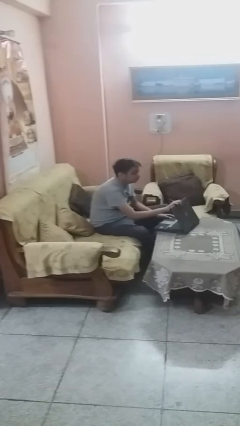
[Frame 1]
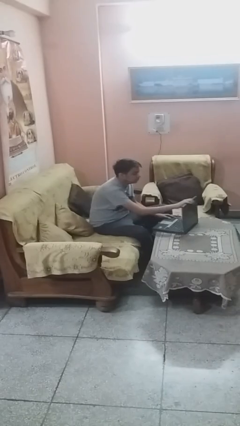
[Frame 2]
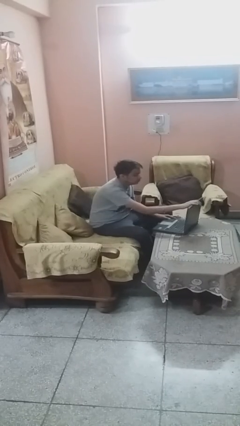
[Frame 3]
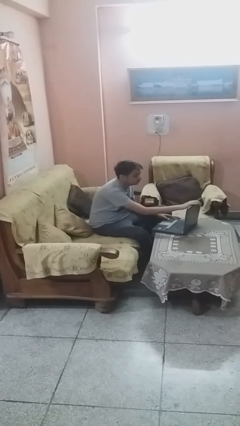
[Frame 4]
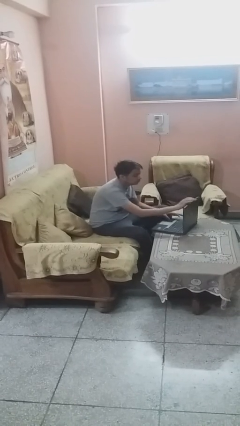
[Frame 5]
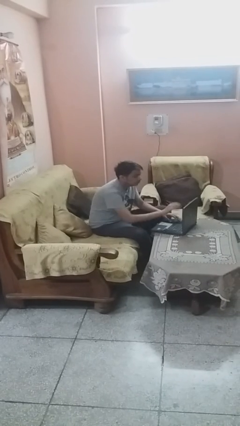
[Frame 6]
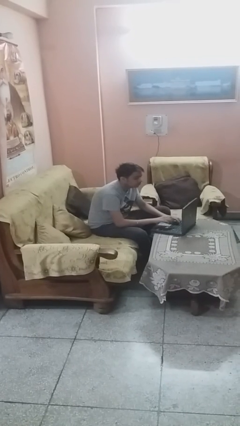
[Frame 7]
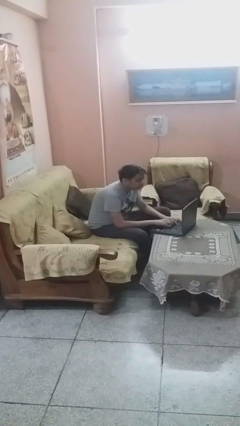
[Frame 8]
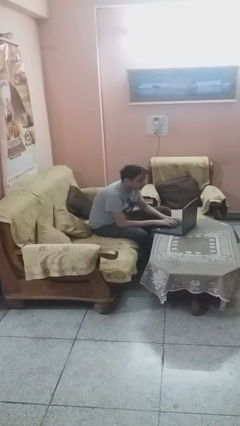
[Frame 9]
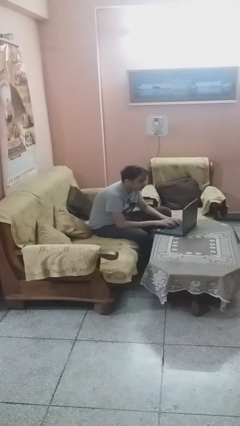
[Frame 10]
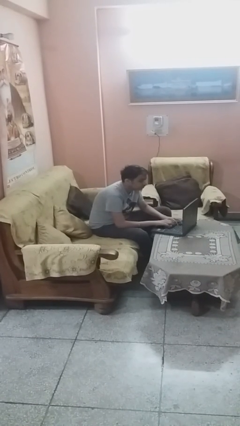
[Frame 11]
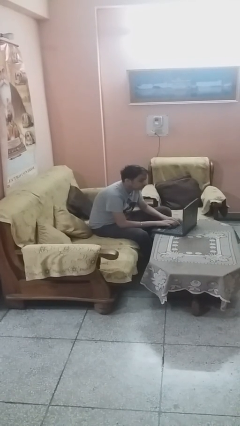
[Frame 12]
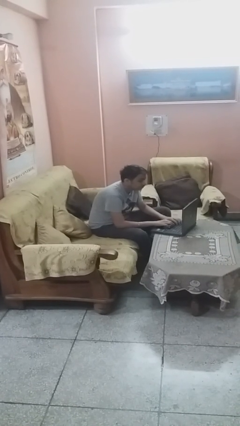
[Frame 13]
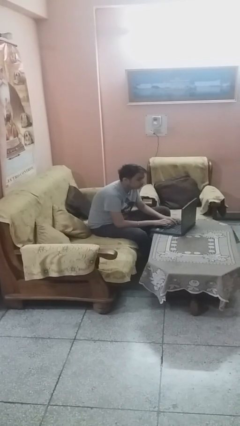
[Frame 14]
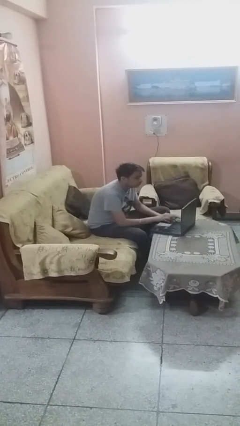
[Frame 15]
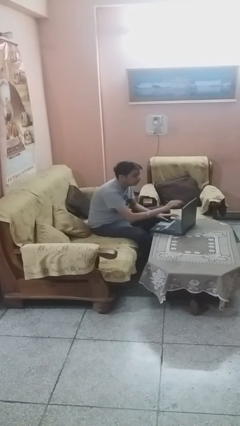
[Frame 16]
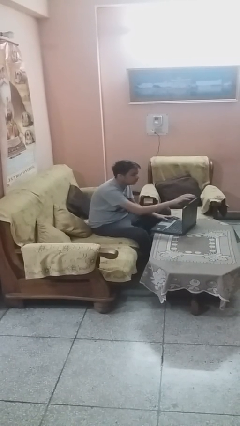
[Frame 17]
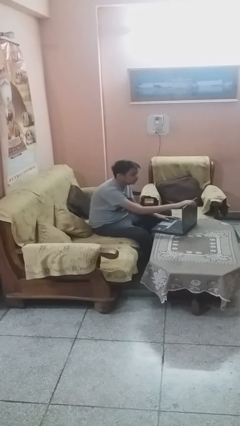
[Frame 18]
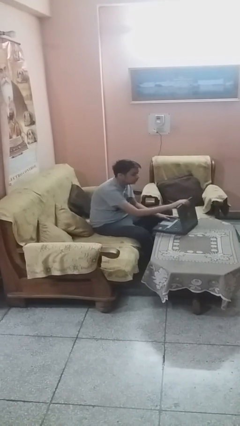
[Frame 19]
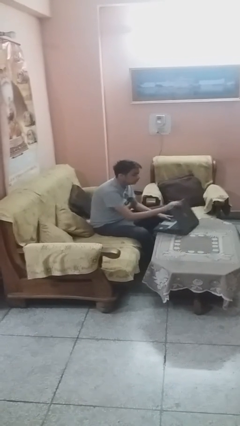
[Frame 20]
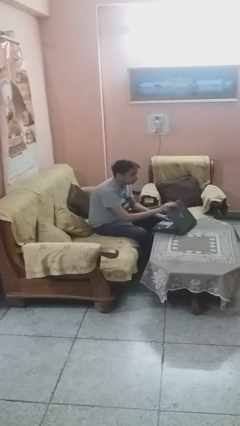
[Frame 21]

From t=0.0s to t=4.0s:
person interacts with laptop

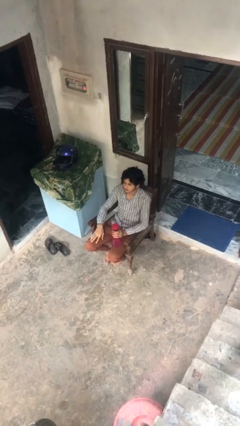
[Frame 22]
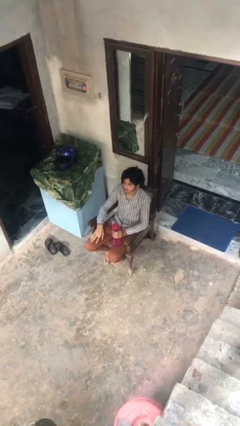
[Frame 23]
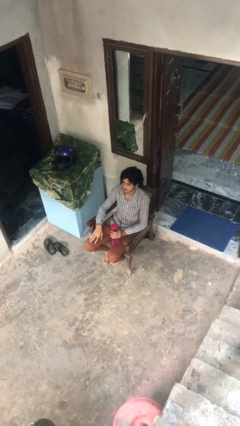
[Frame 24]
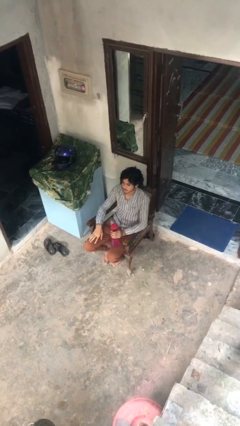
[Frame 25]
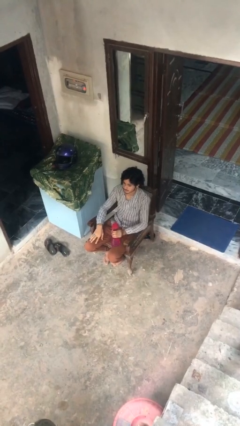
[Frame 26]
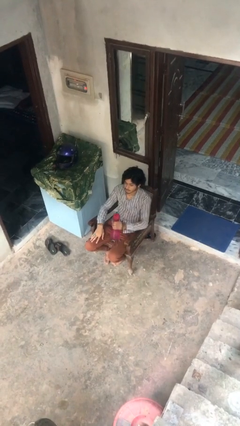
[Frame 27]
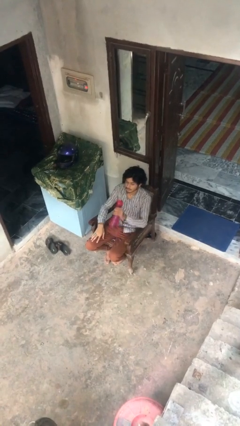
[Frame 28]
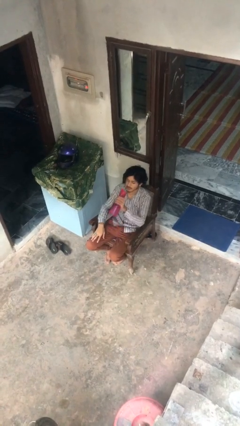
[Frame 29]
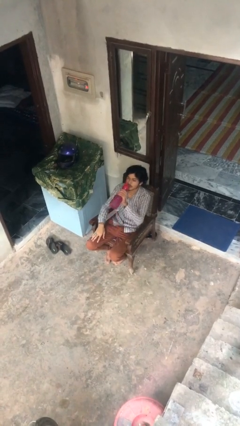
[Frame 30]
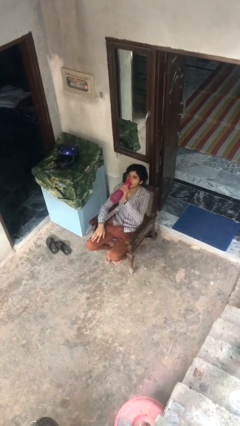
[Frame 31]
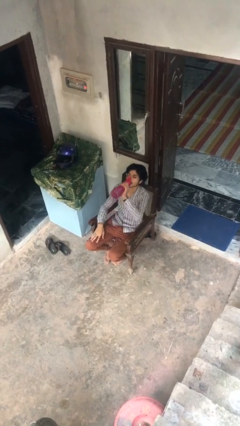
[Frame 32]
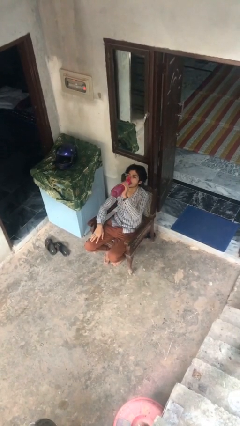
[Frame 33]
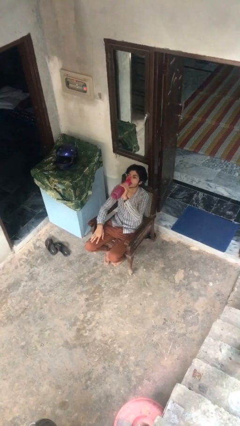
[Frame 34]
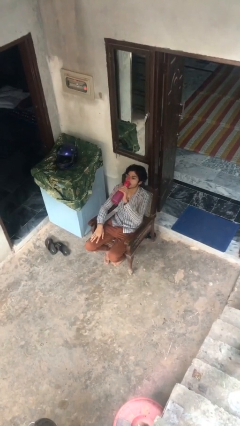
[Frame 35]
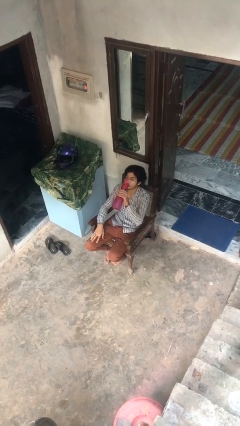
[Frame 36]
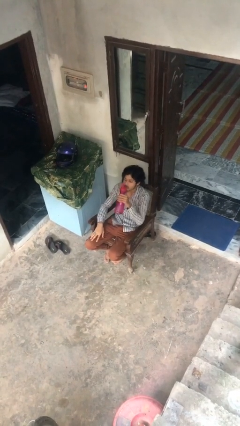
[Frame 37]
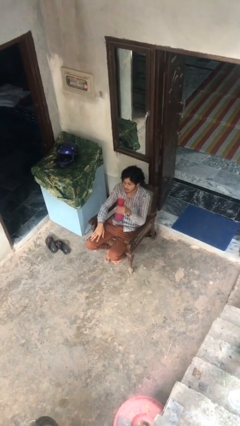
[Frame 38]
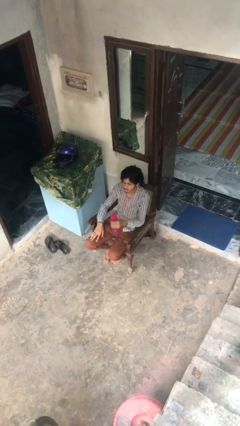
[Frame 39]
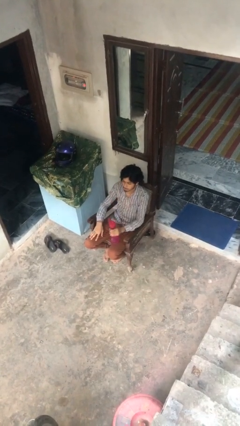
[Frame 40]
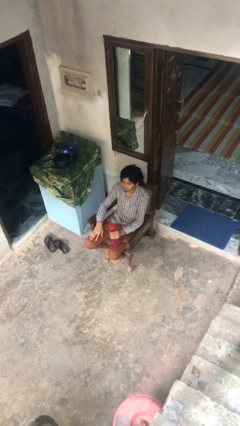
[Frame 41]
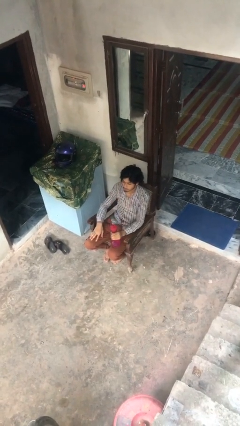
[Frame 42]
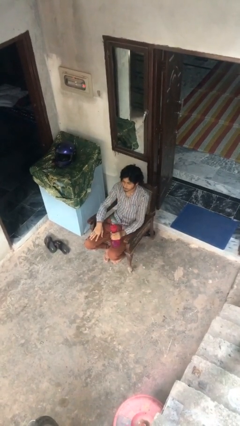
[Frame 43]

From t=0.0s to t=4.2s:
person drinks from bottle

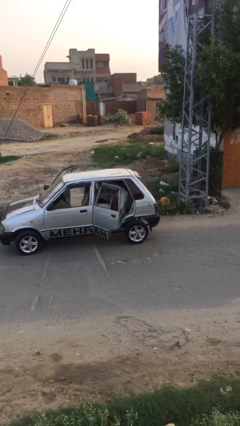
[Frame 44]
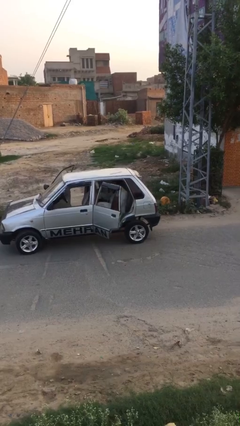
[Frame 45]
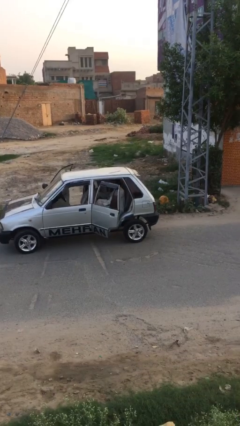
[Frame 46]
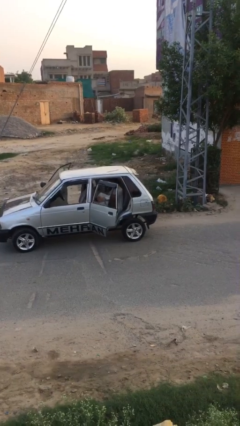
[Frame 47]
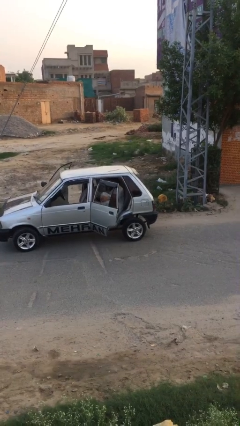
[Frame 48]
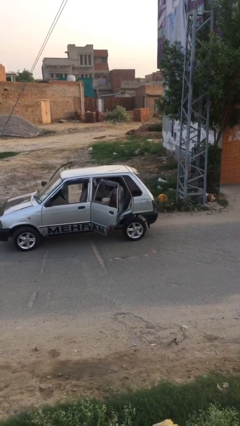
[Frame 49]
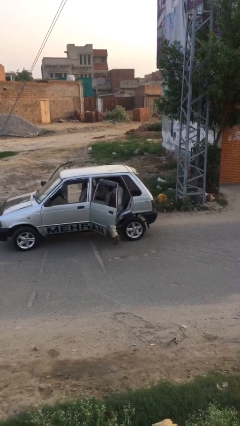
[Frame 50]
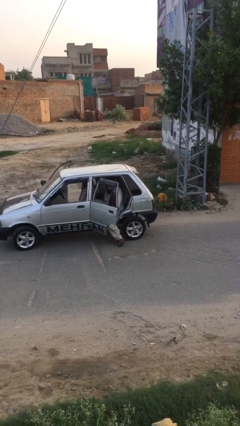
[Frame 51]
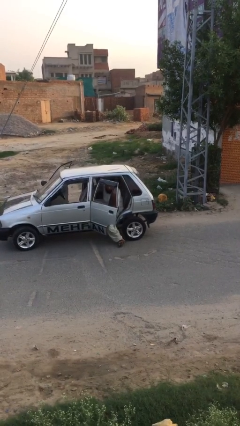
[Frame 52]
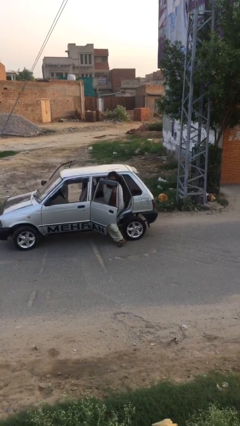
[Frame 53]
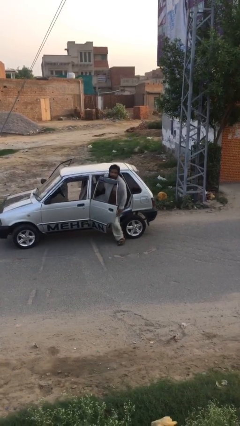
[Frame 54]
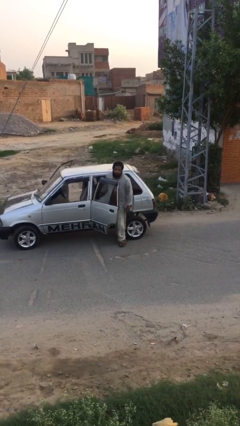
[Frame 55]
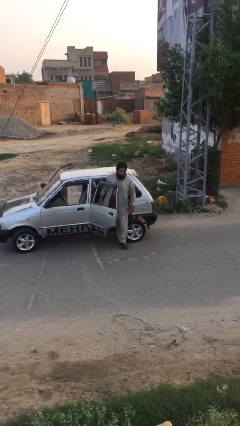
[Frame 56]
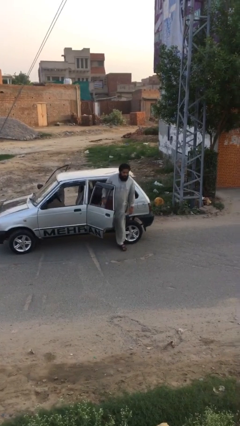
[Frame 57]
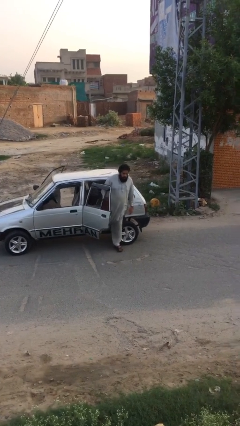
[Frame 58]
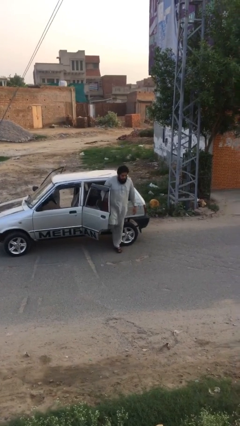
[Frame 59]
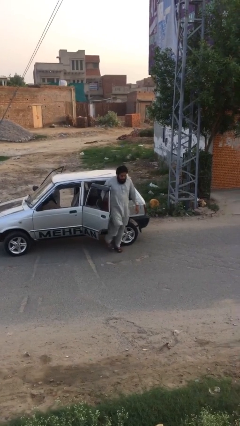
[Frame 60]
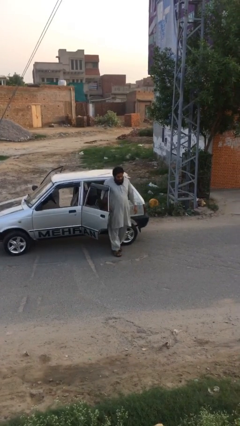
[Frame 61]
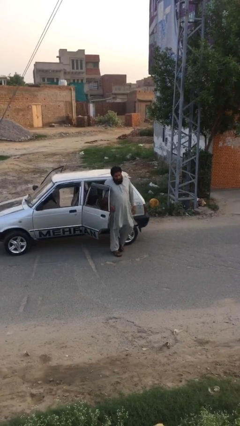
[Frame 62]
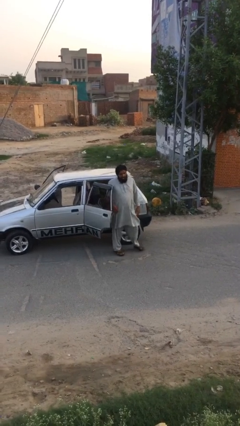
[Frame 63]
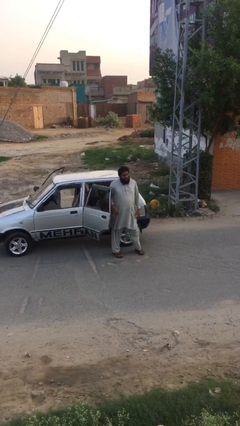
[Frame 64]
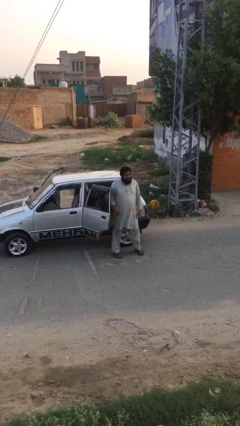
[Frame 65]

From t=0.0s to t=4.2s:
person closes car door

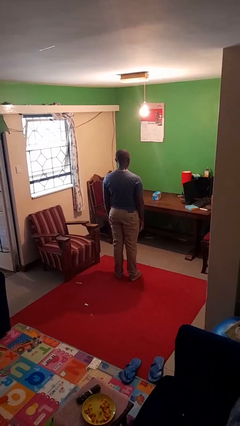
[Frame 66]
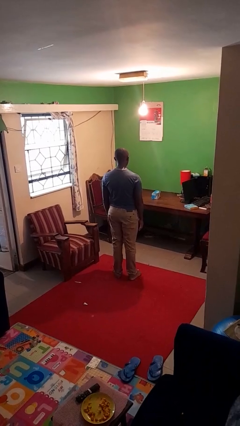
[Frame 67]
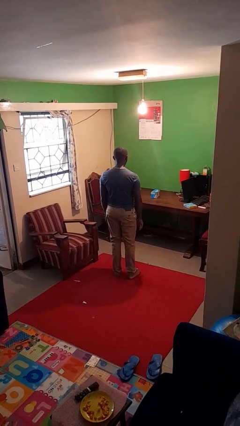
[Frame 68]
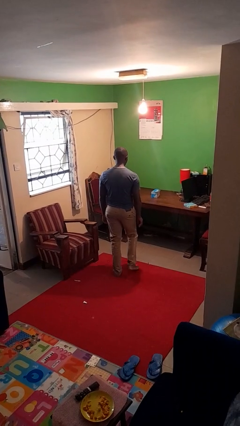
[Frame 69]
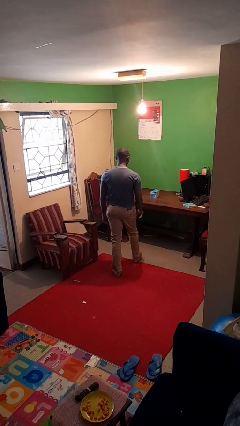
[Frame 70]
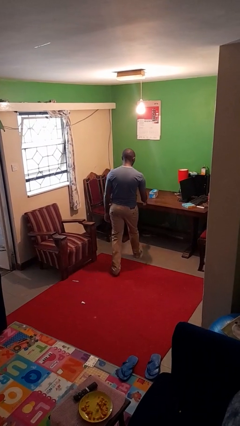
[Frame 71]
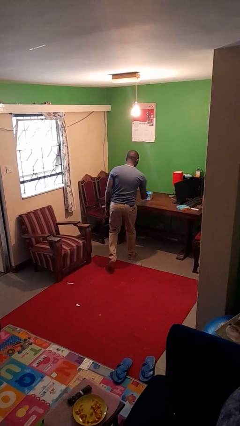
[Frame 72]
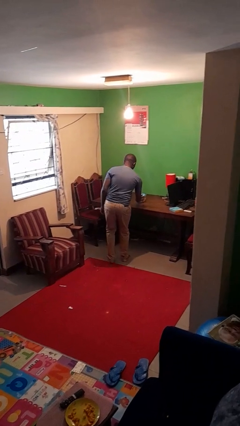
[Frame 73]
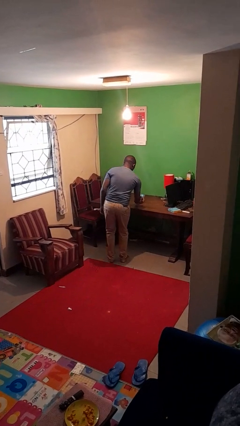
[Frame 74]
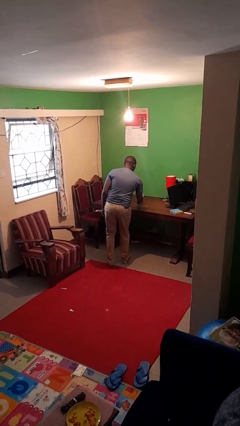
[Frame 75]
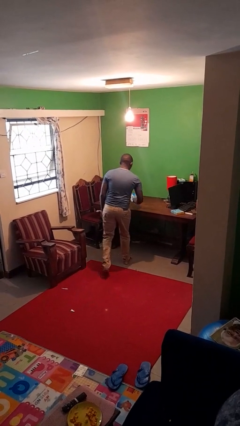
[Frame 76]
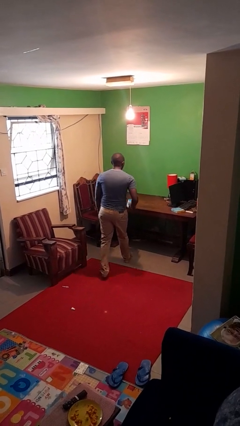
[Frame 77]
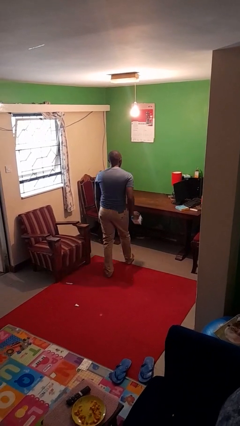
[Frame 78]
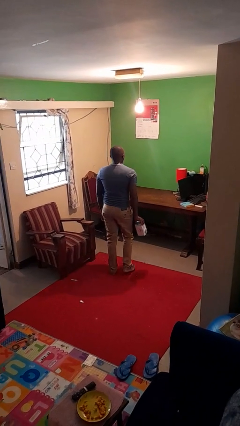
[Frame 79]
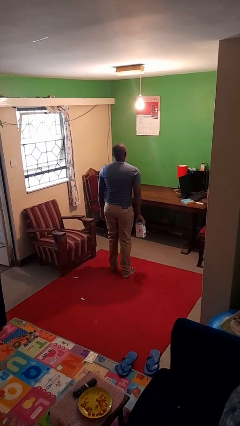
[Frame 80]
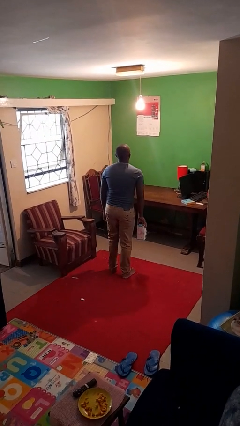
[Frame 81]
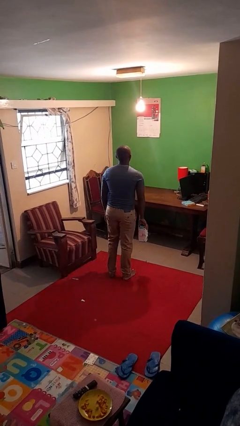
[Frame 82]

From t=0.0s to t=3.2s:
person picks up object from table

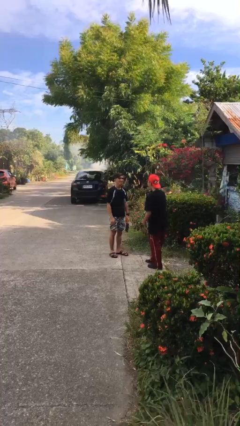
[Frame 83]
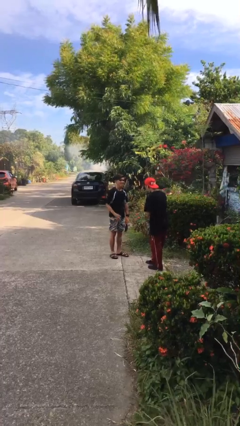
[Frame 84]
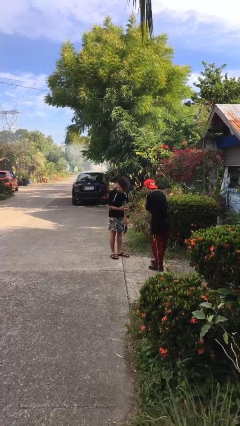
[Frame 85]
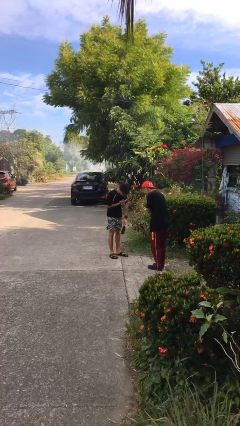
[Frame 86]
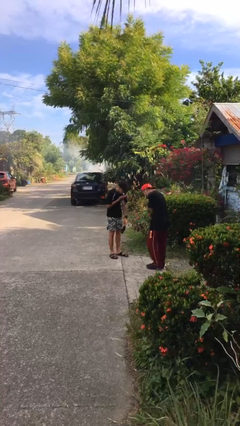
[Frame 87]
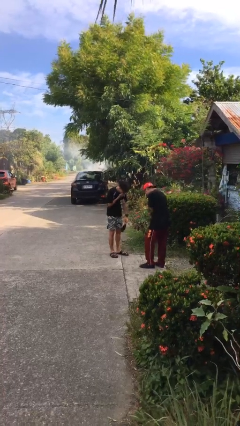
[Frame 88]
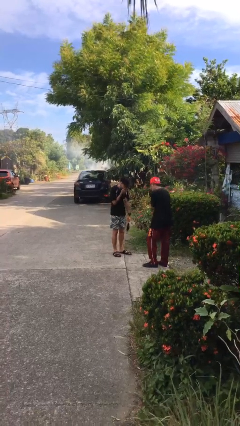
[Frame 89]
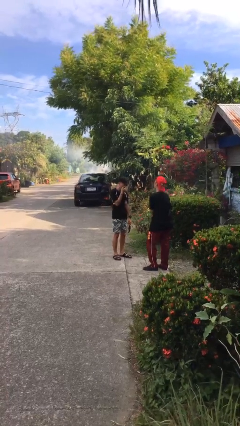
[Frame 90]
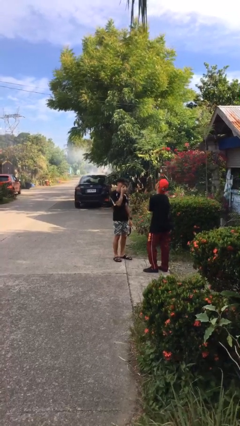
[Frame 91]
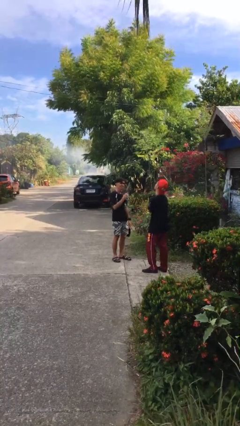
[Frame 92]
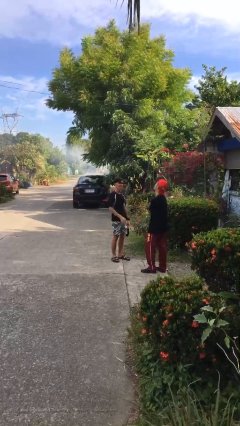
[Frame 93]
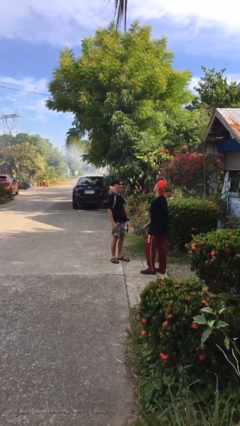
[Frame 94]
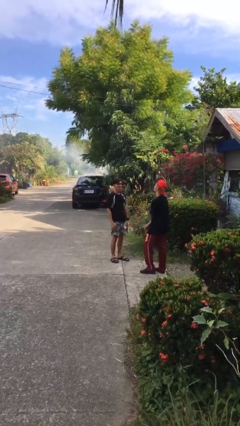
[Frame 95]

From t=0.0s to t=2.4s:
person laughs with person

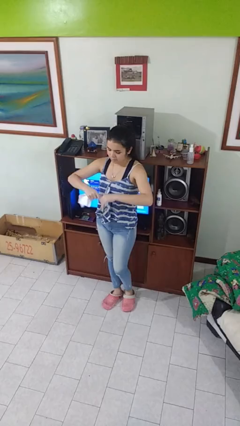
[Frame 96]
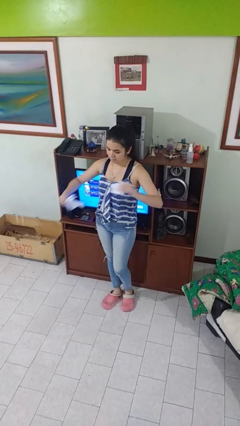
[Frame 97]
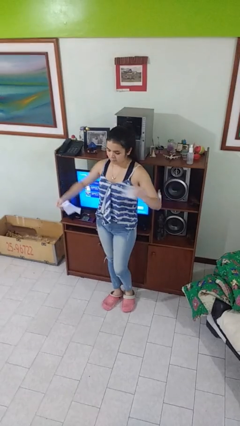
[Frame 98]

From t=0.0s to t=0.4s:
person tears paper
